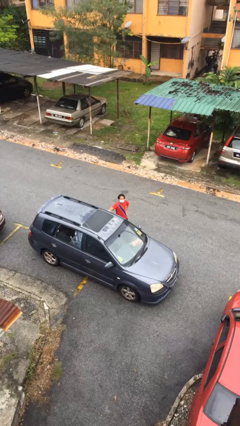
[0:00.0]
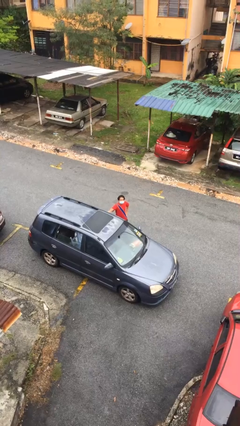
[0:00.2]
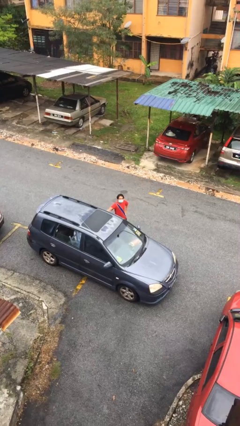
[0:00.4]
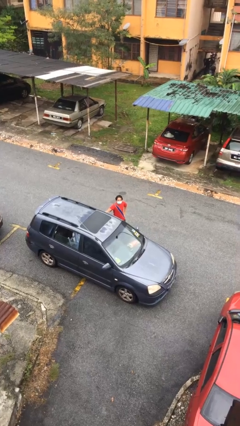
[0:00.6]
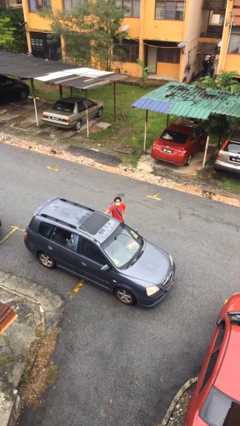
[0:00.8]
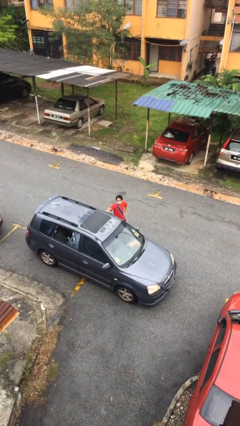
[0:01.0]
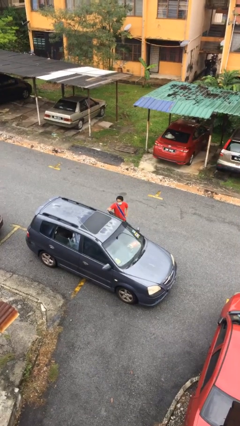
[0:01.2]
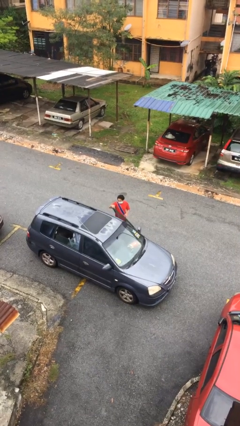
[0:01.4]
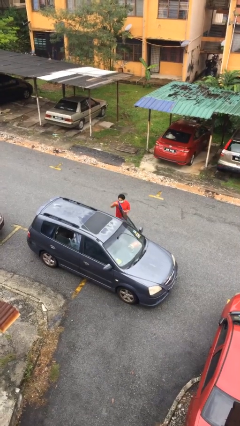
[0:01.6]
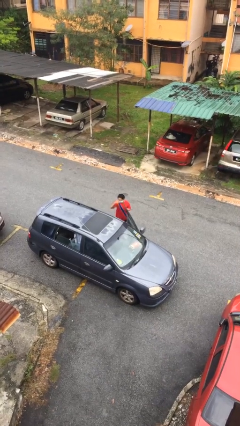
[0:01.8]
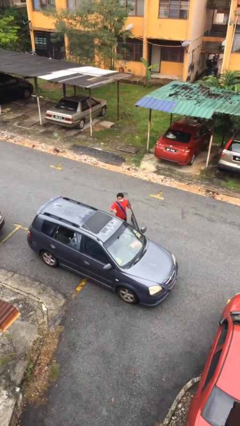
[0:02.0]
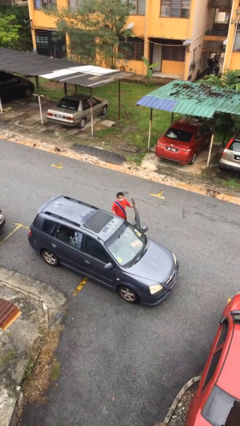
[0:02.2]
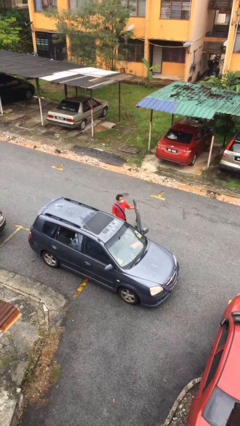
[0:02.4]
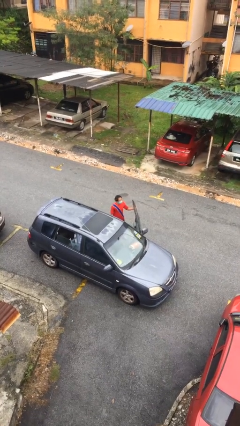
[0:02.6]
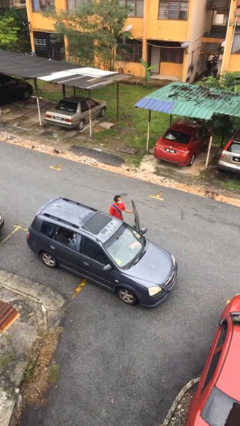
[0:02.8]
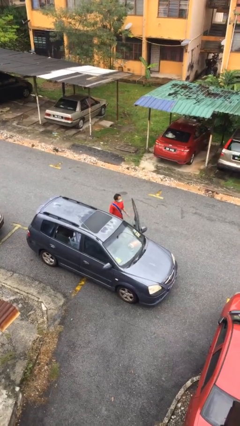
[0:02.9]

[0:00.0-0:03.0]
person opens car door

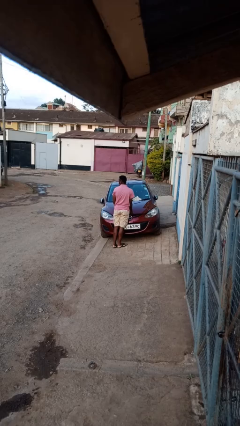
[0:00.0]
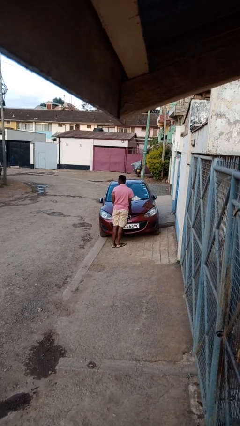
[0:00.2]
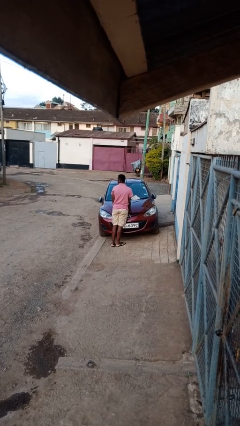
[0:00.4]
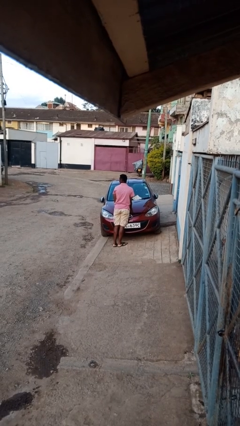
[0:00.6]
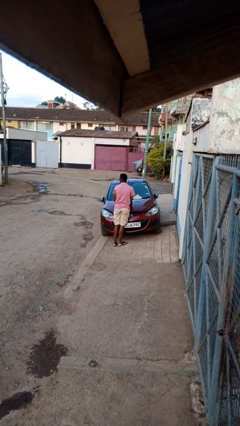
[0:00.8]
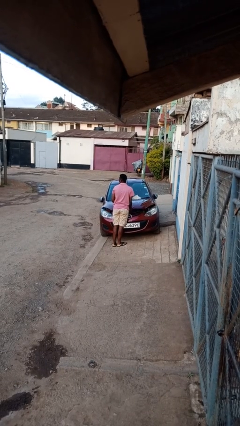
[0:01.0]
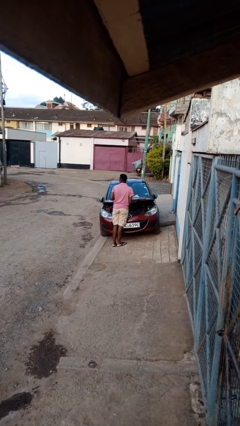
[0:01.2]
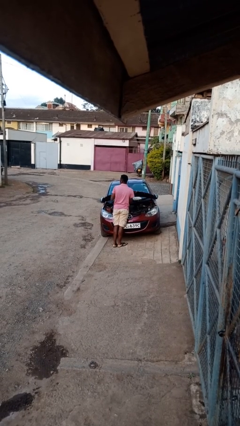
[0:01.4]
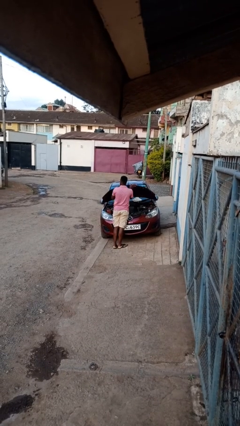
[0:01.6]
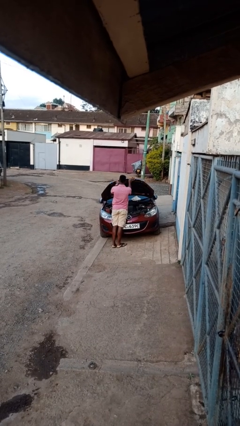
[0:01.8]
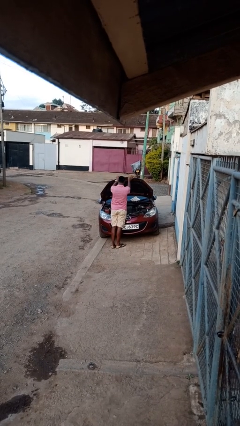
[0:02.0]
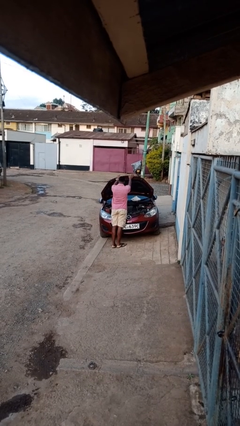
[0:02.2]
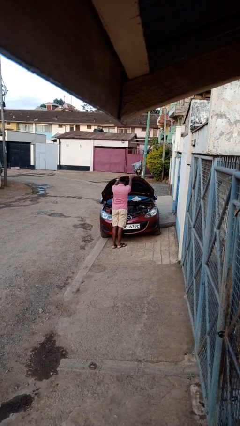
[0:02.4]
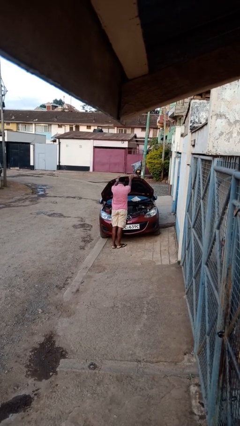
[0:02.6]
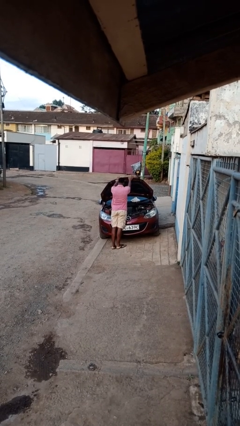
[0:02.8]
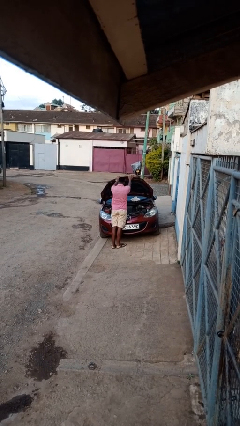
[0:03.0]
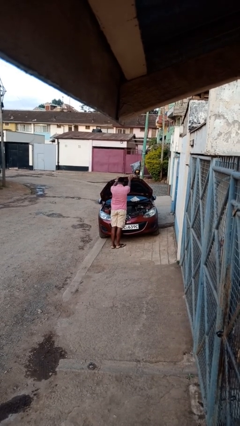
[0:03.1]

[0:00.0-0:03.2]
person opens car hood

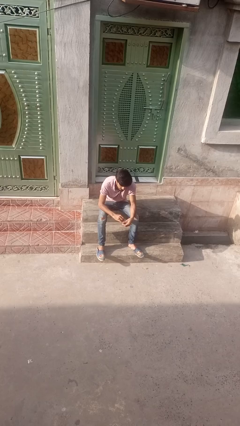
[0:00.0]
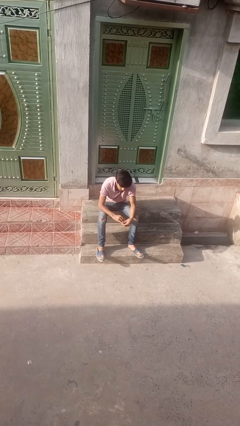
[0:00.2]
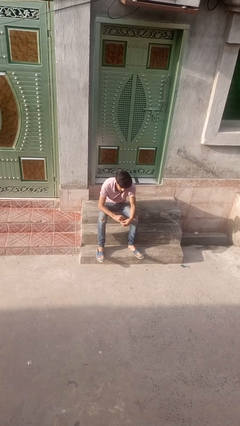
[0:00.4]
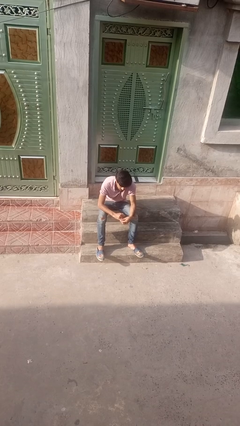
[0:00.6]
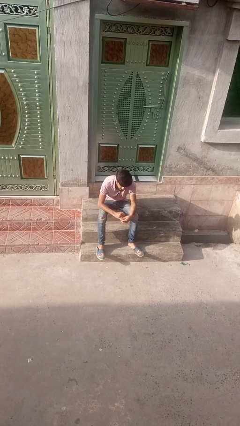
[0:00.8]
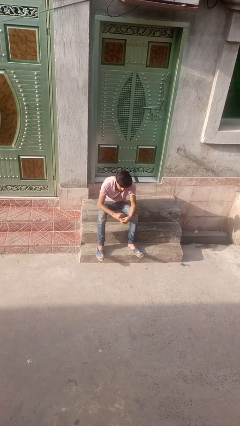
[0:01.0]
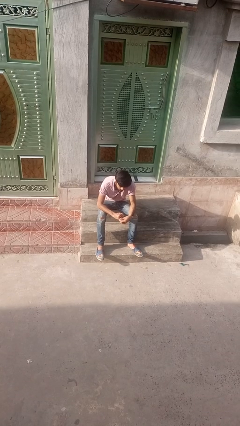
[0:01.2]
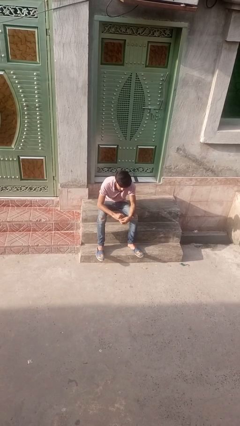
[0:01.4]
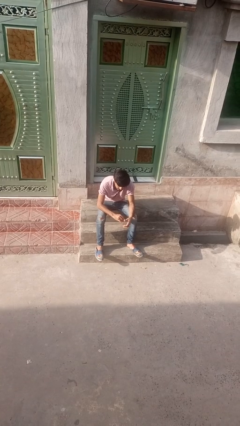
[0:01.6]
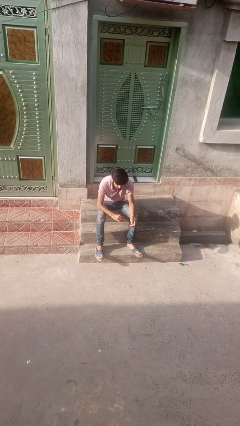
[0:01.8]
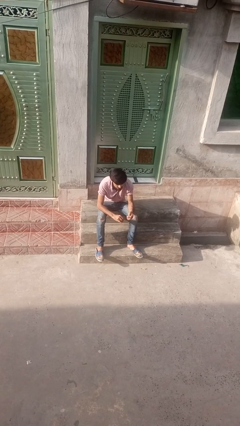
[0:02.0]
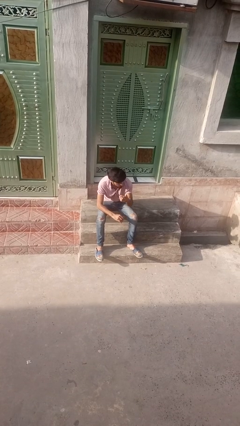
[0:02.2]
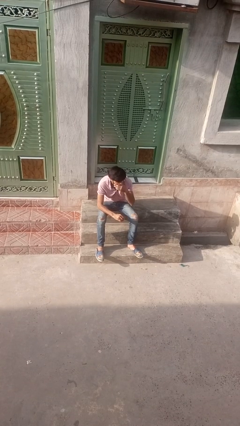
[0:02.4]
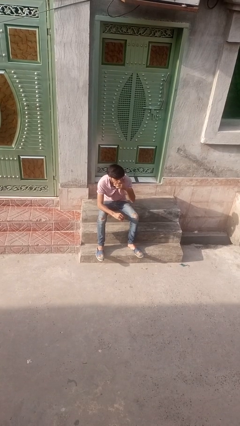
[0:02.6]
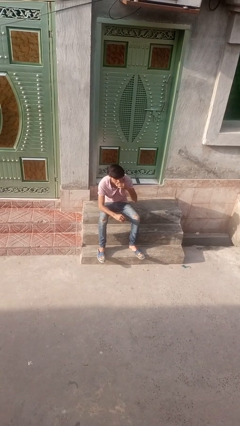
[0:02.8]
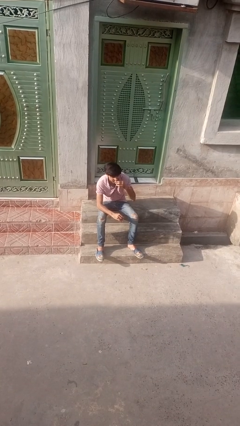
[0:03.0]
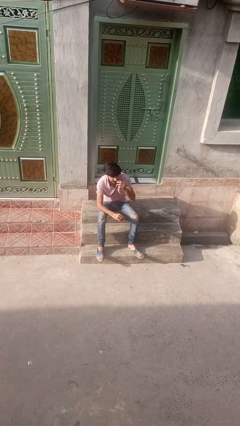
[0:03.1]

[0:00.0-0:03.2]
person puts on ring

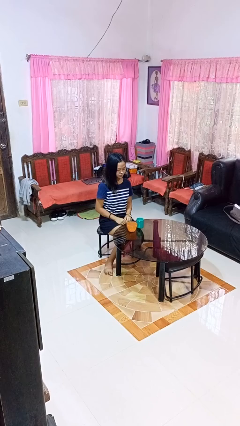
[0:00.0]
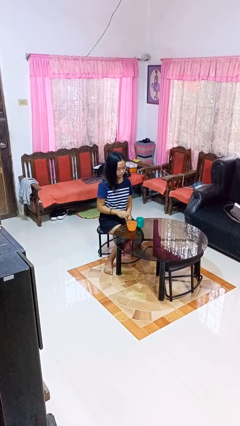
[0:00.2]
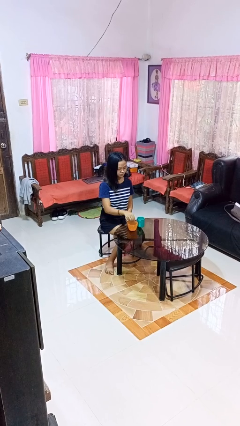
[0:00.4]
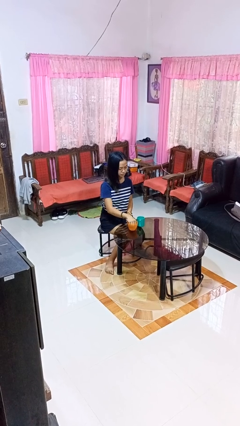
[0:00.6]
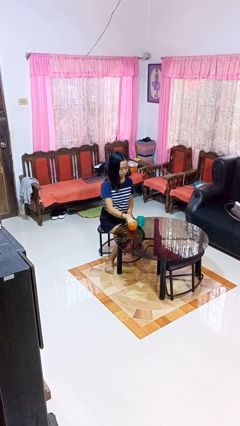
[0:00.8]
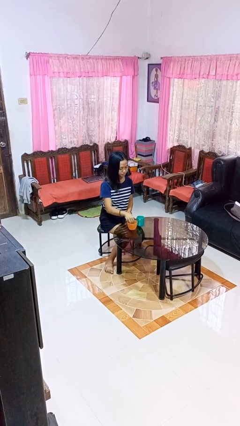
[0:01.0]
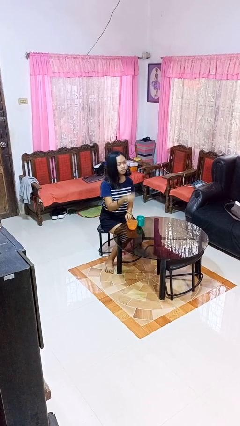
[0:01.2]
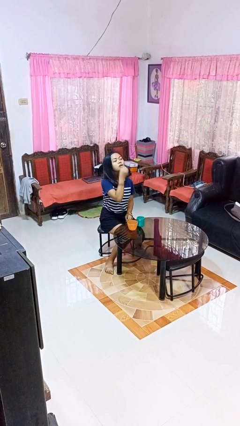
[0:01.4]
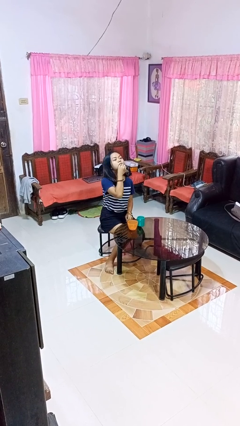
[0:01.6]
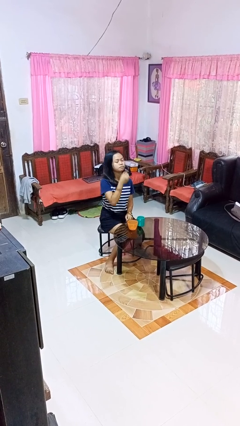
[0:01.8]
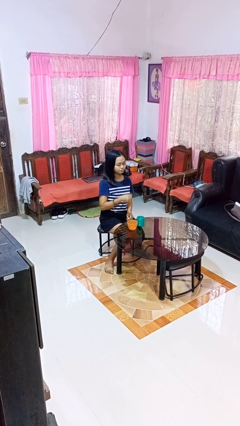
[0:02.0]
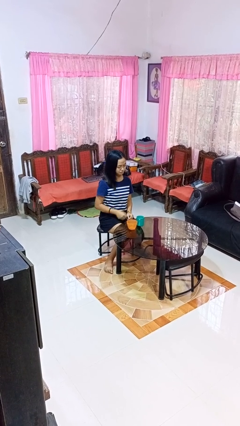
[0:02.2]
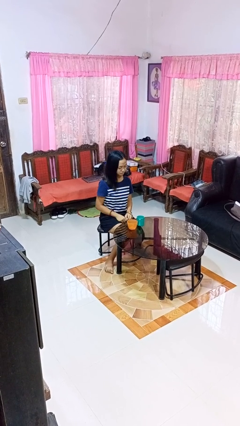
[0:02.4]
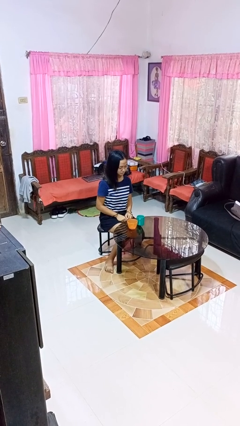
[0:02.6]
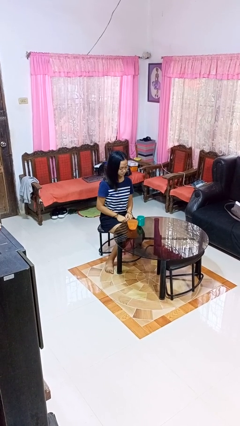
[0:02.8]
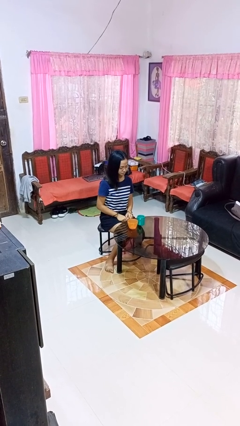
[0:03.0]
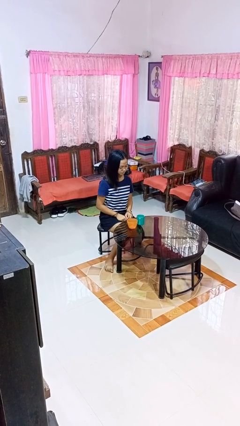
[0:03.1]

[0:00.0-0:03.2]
person takes medicine pills

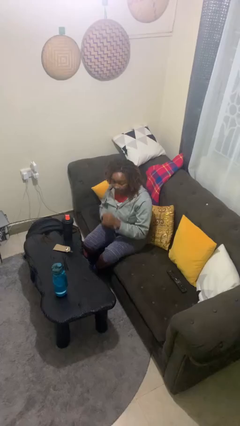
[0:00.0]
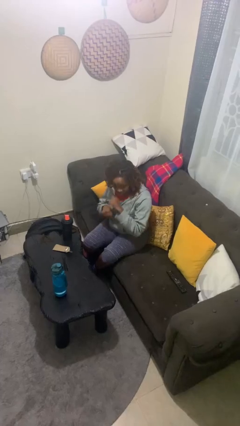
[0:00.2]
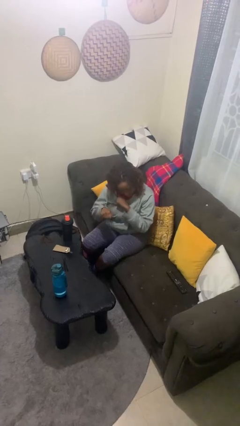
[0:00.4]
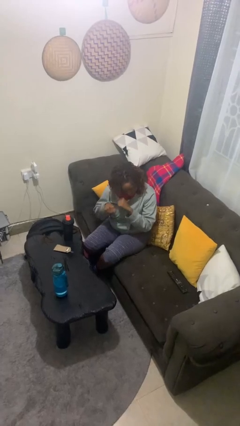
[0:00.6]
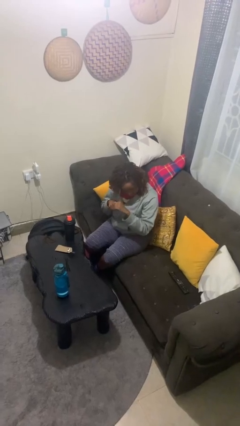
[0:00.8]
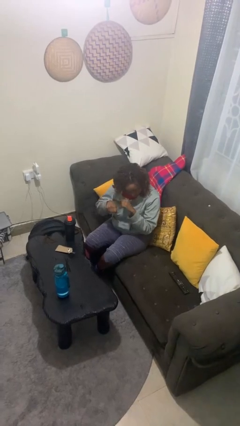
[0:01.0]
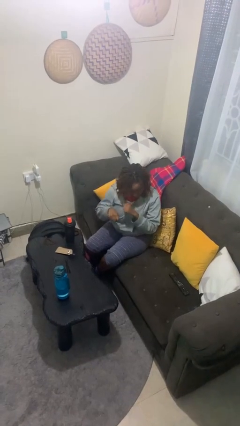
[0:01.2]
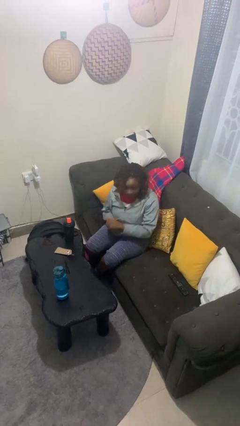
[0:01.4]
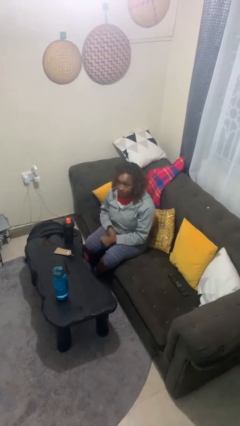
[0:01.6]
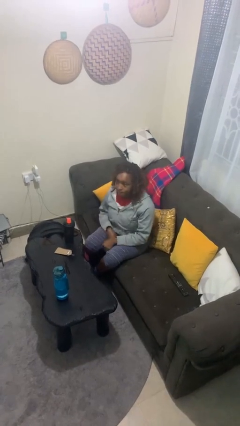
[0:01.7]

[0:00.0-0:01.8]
person punches

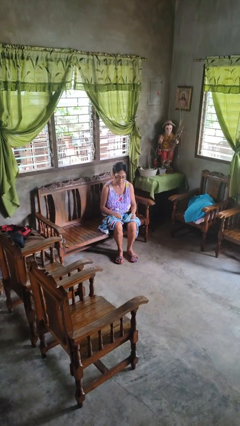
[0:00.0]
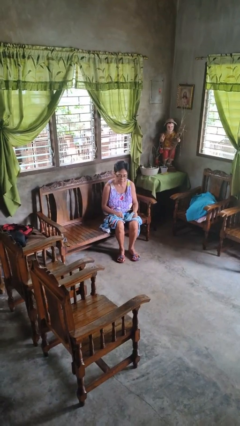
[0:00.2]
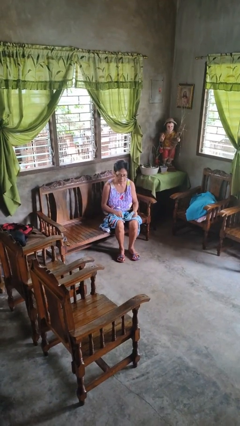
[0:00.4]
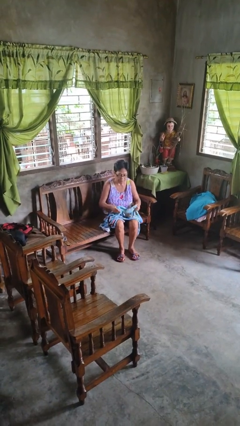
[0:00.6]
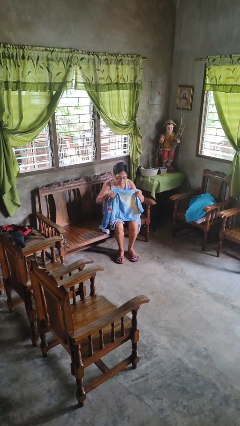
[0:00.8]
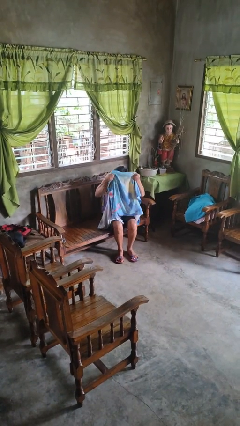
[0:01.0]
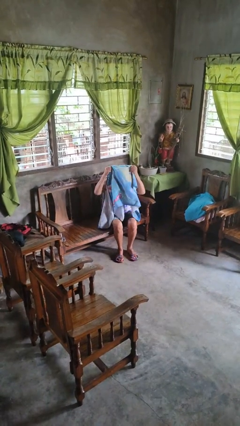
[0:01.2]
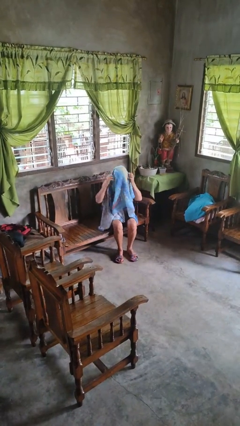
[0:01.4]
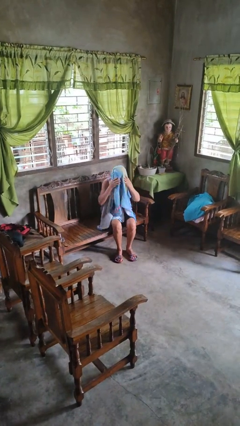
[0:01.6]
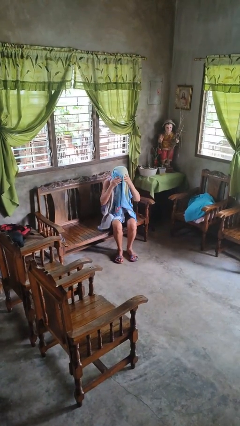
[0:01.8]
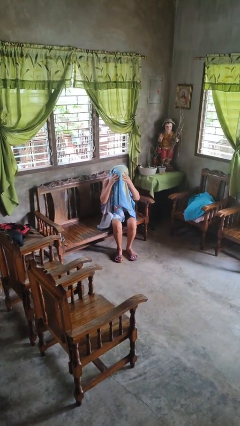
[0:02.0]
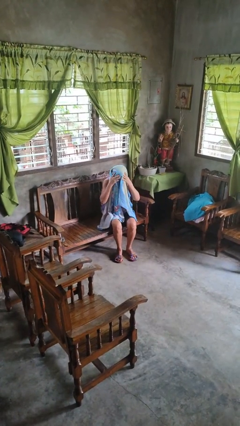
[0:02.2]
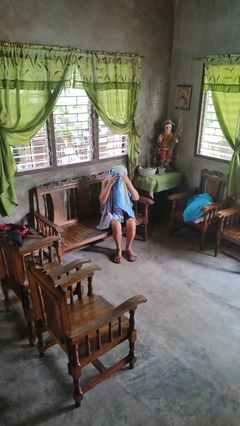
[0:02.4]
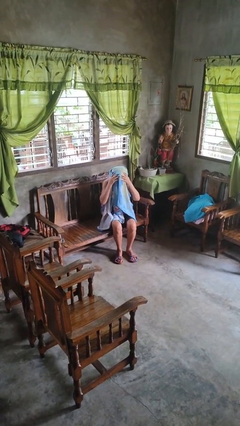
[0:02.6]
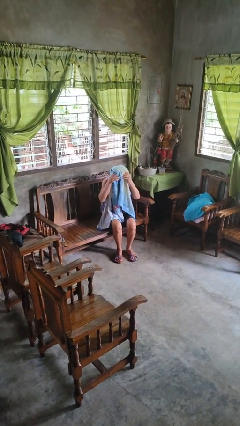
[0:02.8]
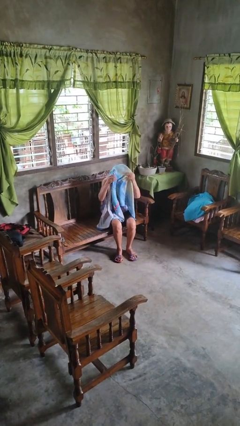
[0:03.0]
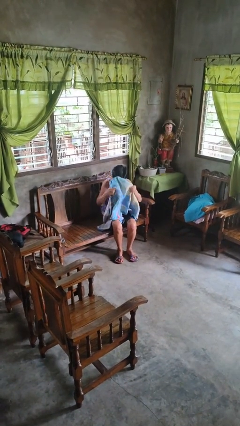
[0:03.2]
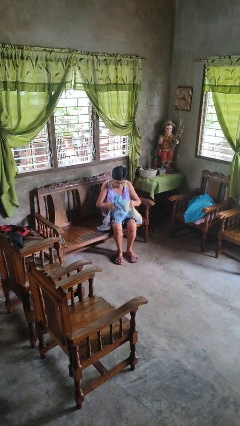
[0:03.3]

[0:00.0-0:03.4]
person dries hair with towel
